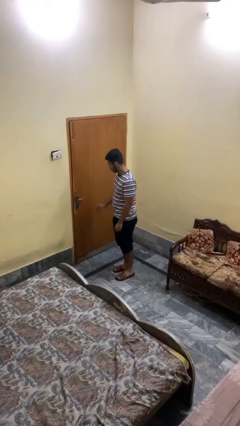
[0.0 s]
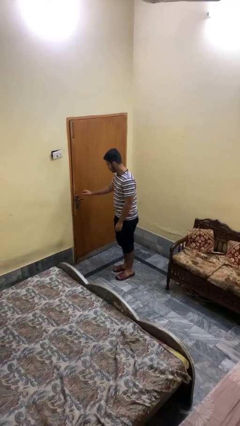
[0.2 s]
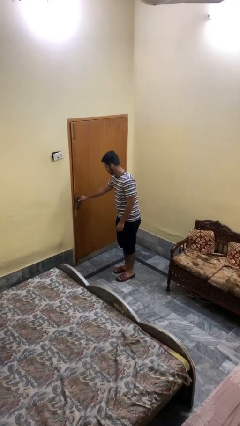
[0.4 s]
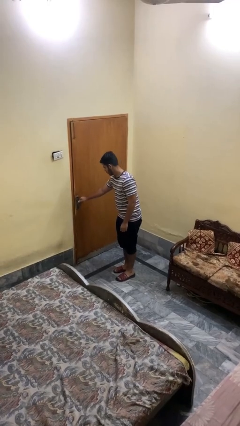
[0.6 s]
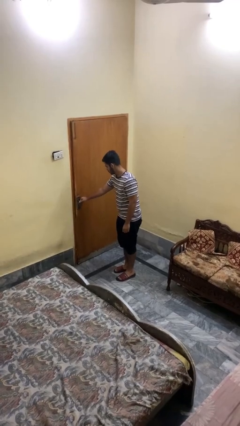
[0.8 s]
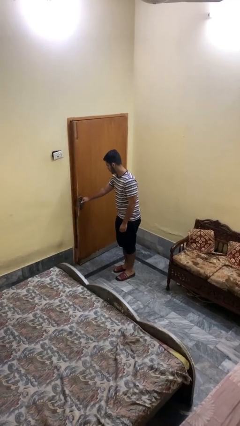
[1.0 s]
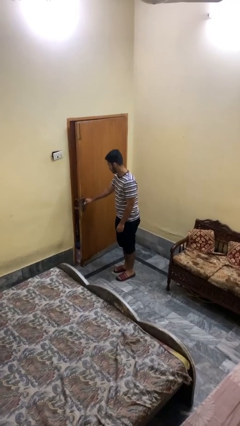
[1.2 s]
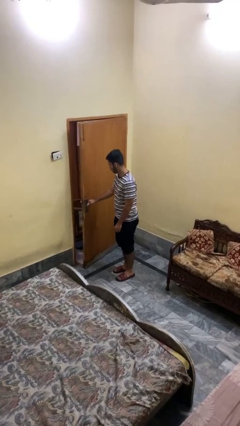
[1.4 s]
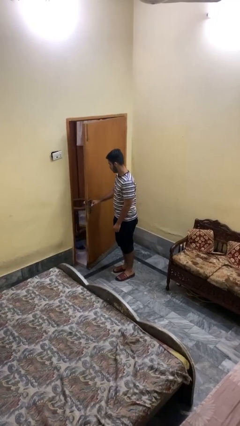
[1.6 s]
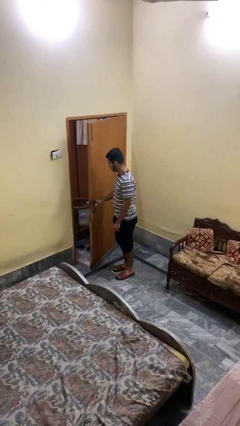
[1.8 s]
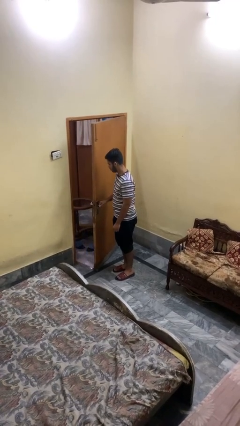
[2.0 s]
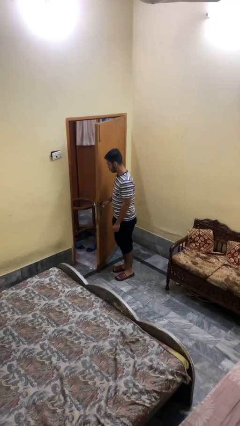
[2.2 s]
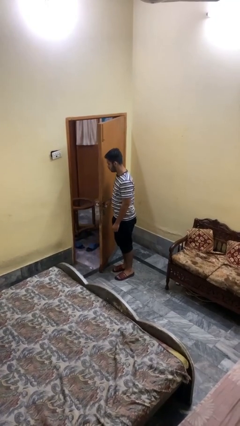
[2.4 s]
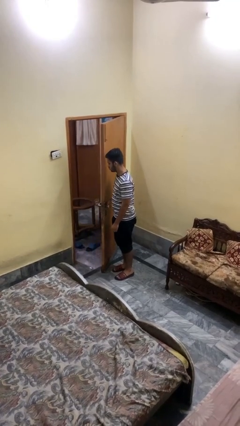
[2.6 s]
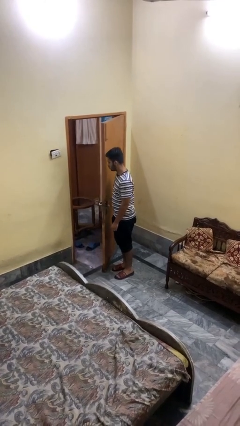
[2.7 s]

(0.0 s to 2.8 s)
person opens facility door

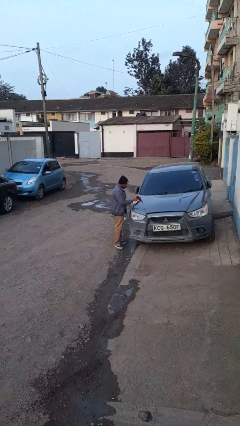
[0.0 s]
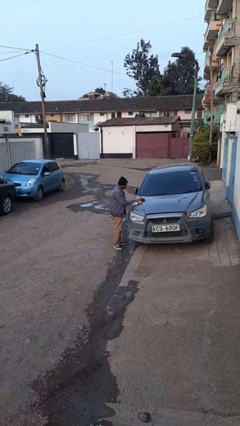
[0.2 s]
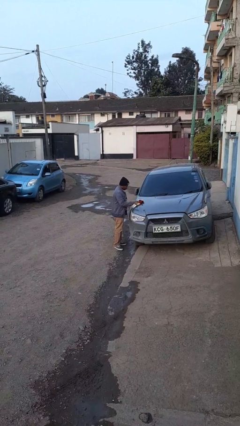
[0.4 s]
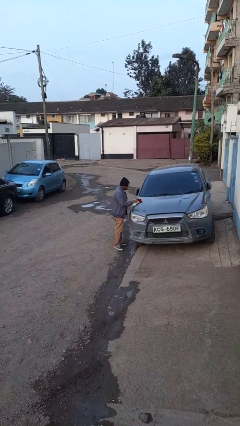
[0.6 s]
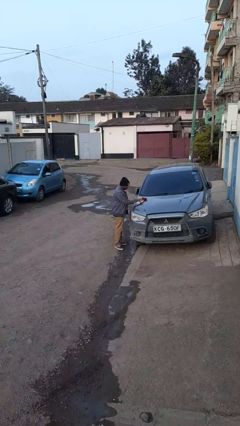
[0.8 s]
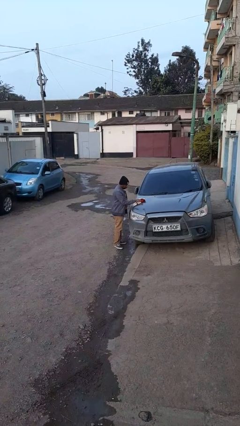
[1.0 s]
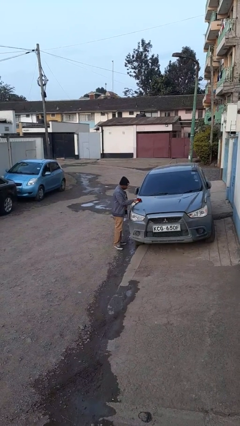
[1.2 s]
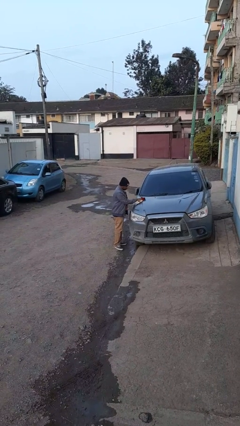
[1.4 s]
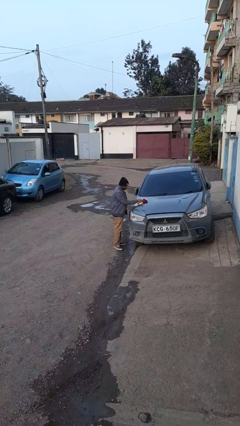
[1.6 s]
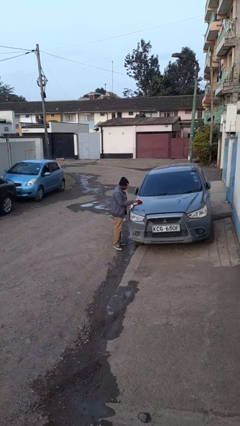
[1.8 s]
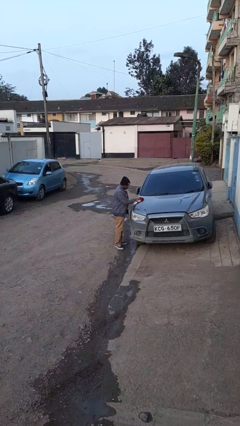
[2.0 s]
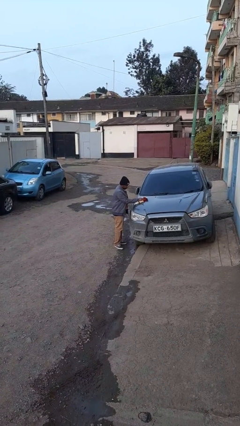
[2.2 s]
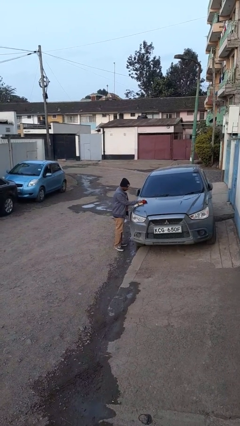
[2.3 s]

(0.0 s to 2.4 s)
person polishes car with rag

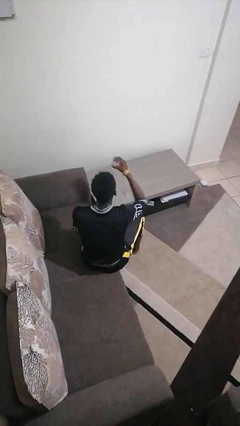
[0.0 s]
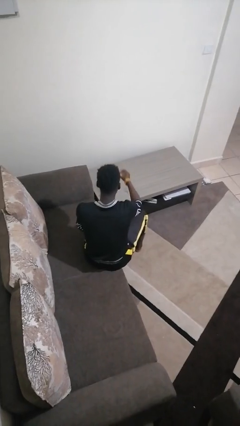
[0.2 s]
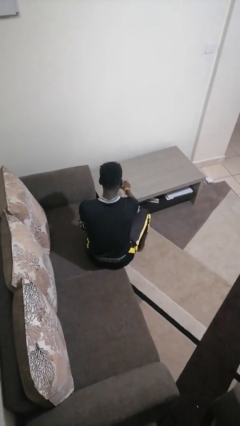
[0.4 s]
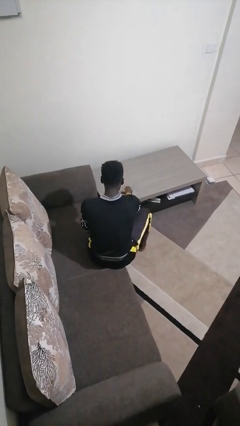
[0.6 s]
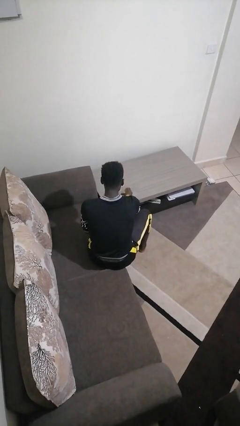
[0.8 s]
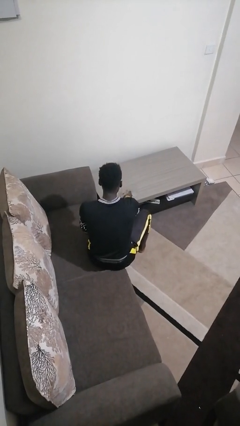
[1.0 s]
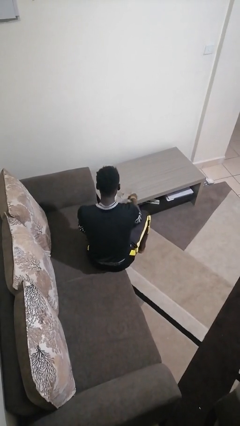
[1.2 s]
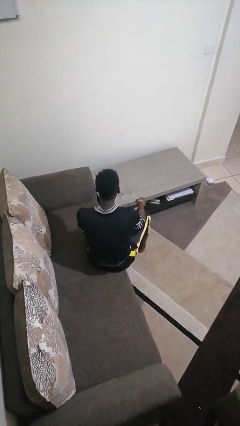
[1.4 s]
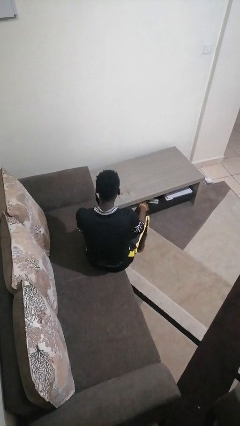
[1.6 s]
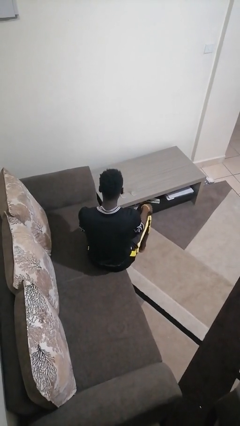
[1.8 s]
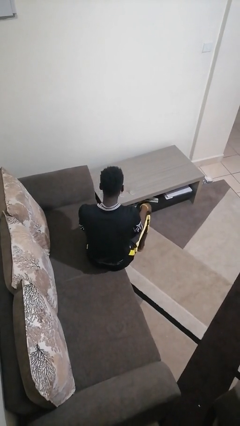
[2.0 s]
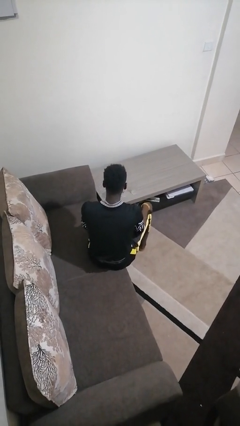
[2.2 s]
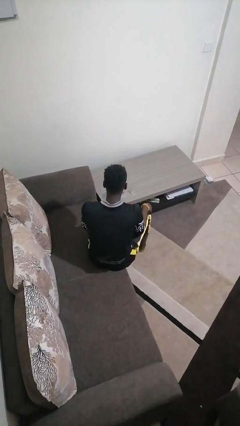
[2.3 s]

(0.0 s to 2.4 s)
person puts down object on table

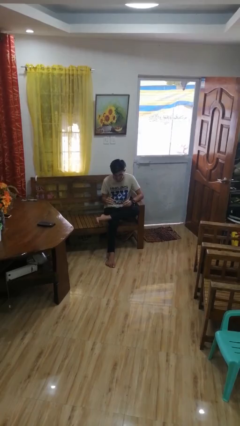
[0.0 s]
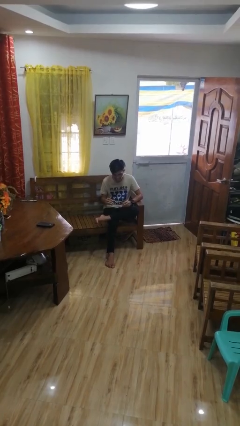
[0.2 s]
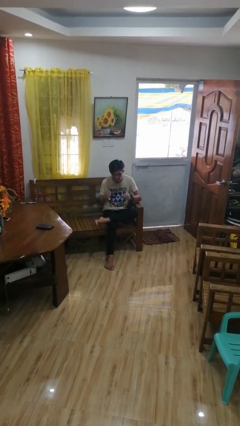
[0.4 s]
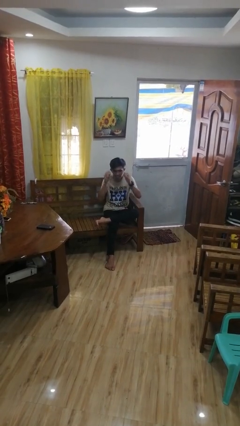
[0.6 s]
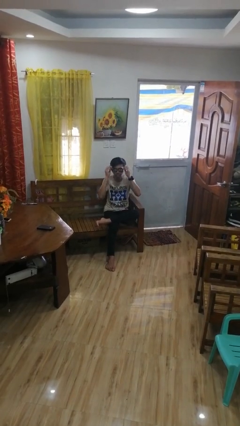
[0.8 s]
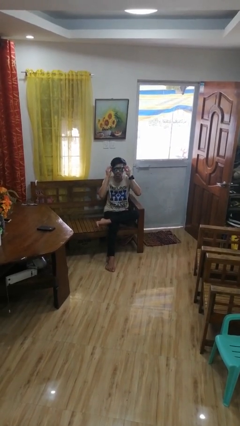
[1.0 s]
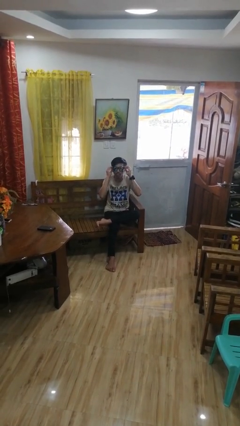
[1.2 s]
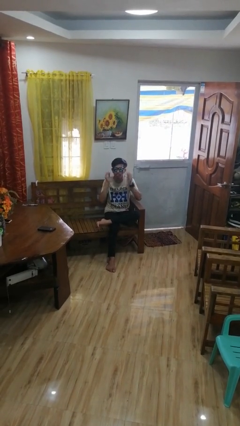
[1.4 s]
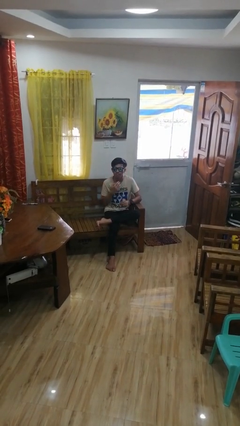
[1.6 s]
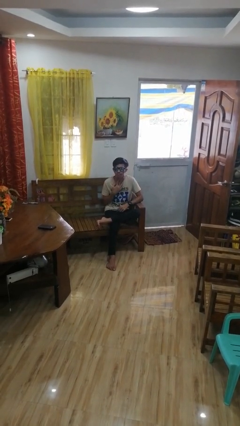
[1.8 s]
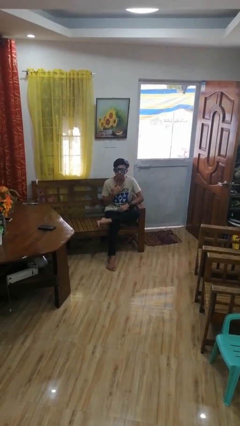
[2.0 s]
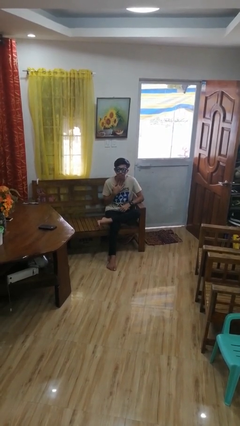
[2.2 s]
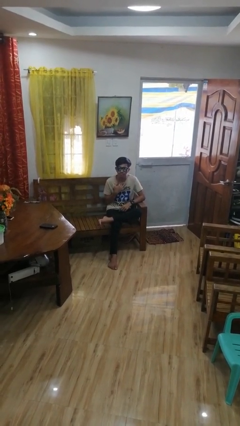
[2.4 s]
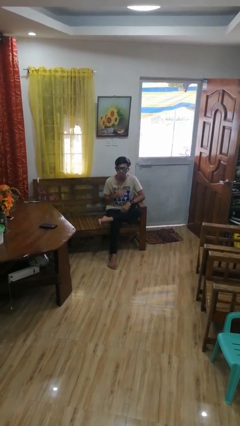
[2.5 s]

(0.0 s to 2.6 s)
person puts on sunglasses

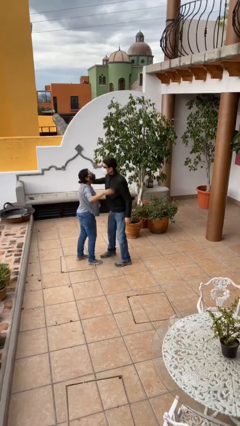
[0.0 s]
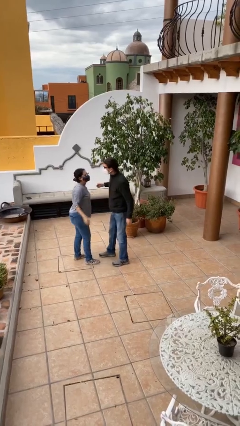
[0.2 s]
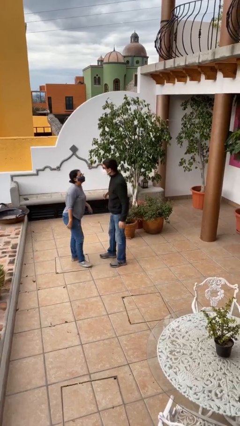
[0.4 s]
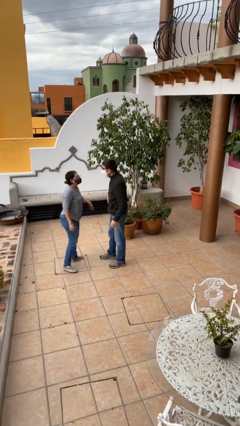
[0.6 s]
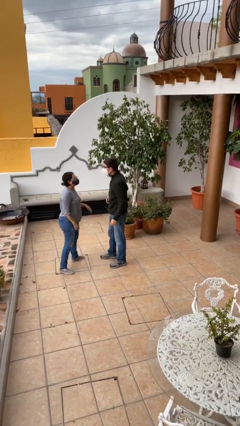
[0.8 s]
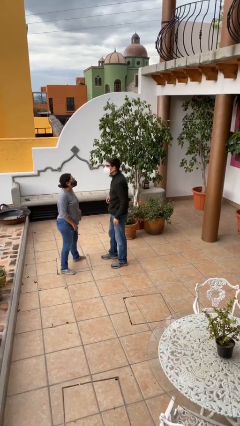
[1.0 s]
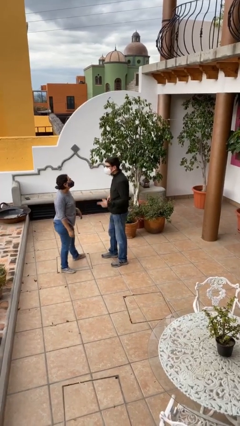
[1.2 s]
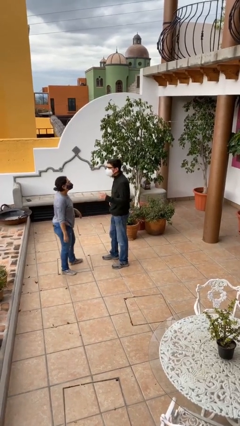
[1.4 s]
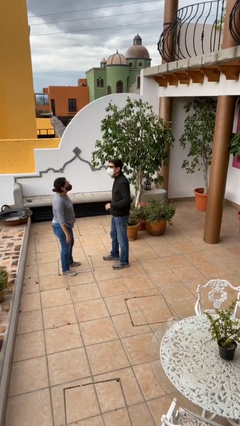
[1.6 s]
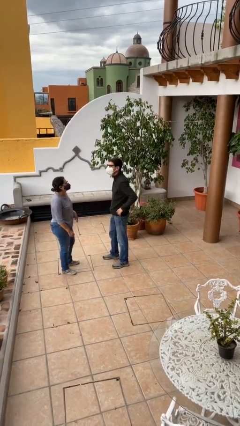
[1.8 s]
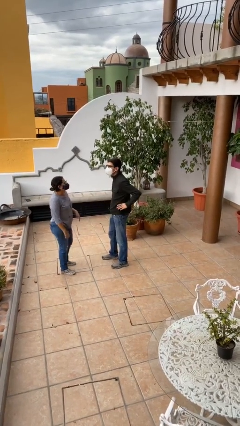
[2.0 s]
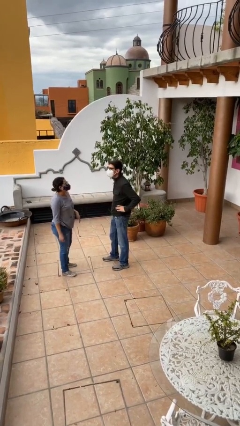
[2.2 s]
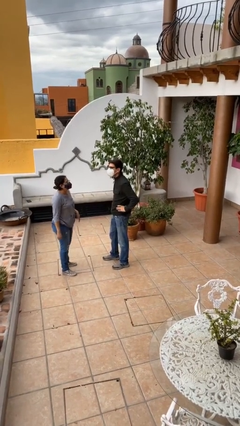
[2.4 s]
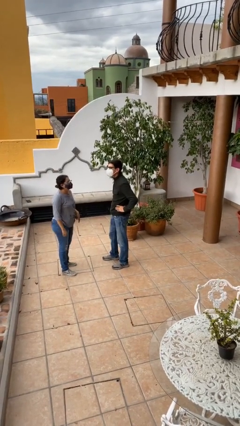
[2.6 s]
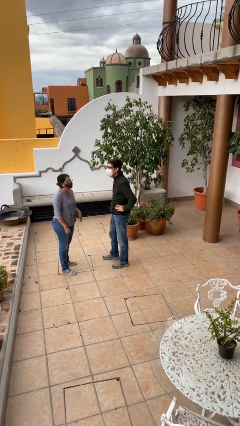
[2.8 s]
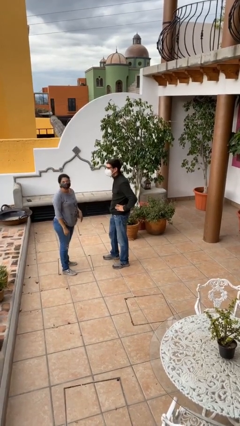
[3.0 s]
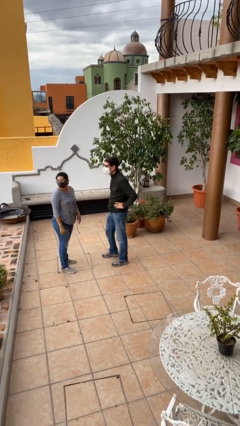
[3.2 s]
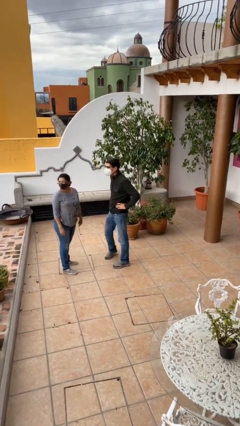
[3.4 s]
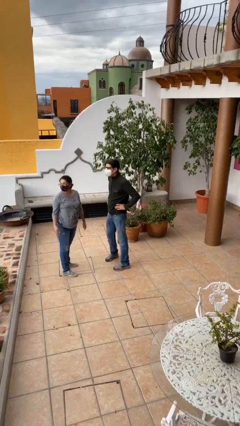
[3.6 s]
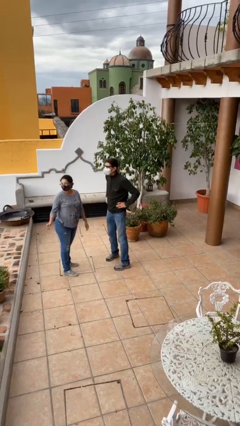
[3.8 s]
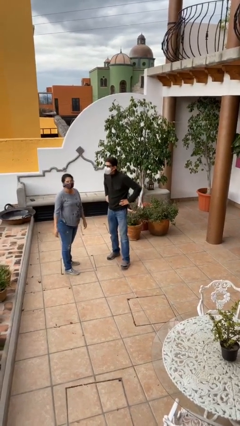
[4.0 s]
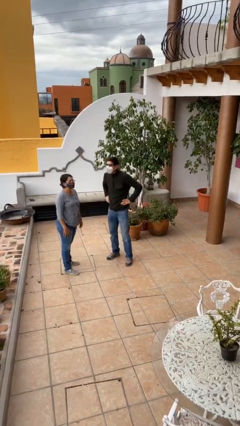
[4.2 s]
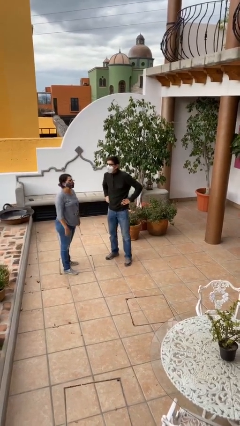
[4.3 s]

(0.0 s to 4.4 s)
person talks to person

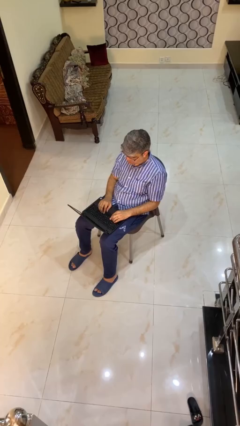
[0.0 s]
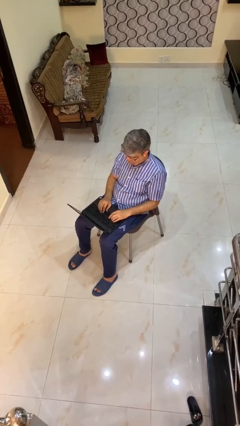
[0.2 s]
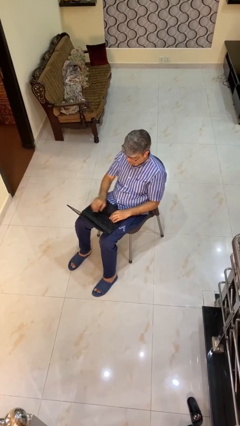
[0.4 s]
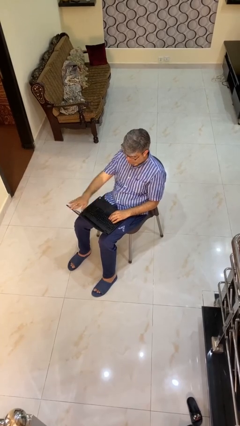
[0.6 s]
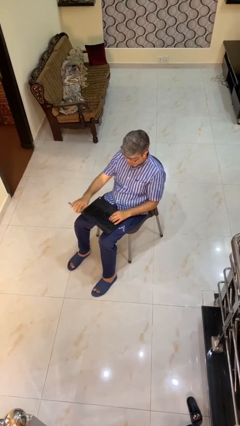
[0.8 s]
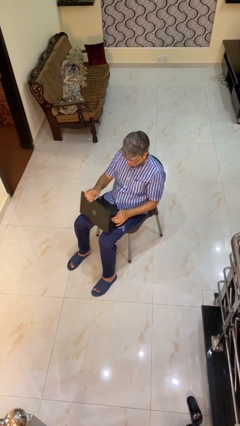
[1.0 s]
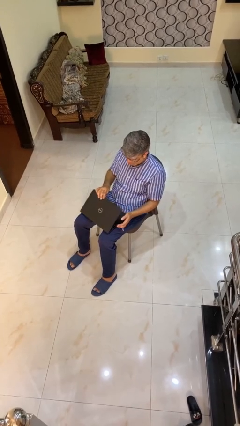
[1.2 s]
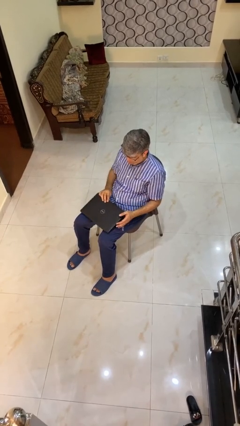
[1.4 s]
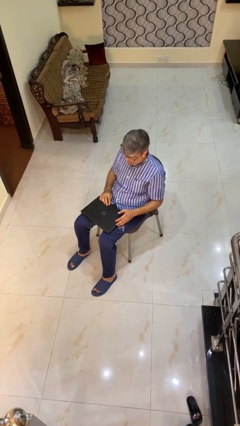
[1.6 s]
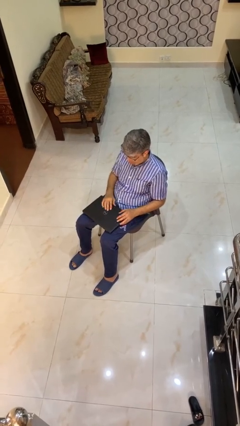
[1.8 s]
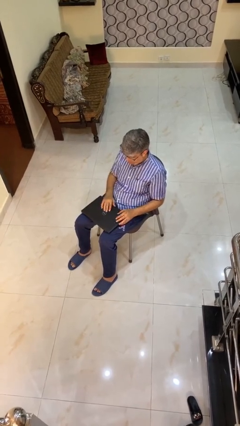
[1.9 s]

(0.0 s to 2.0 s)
person closes laptop

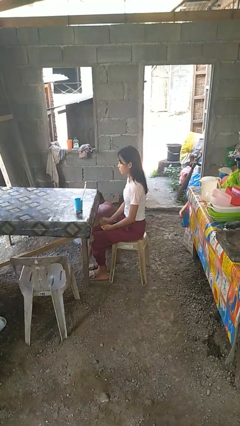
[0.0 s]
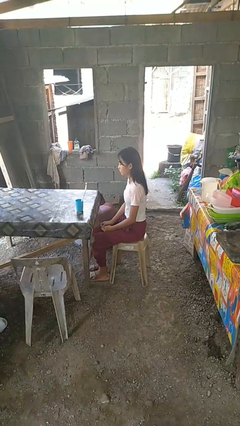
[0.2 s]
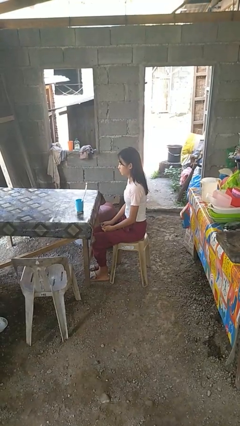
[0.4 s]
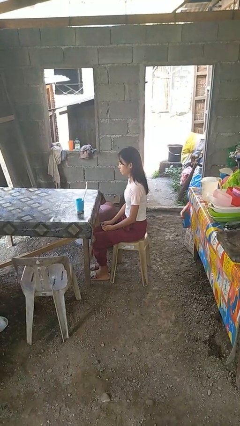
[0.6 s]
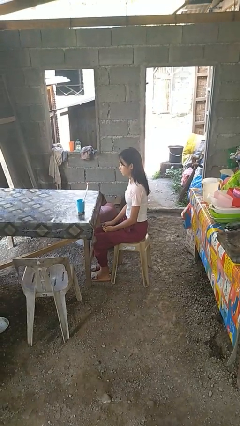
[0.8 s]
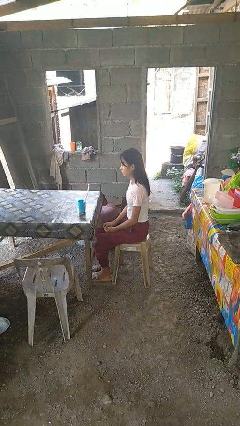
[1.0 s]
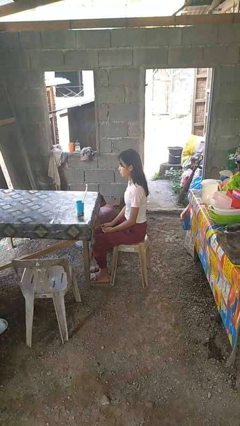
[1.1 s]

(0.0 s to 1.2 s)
person lights candle
